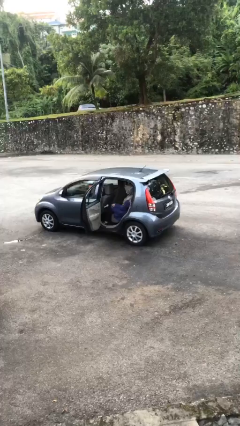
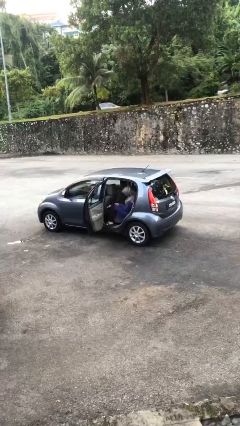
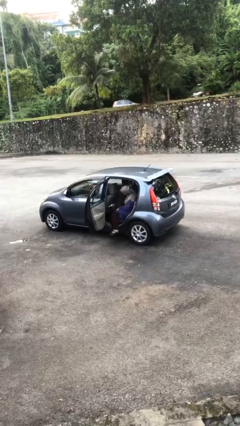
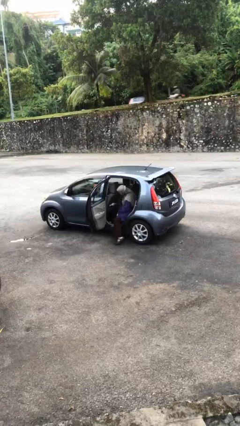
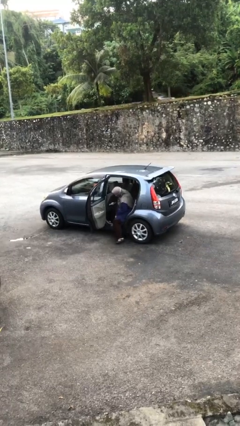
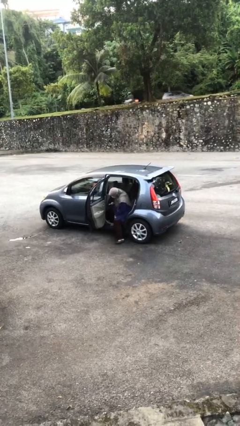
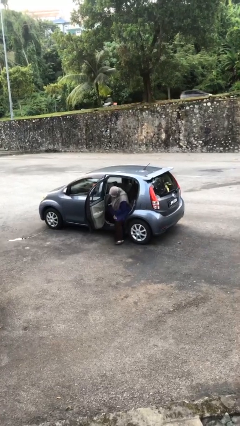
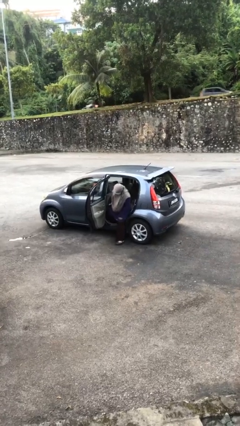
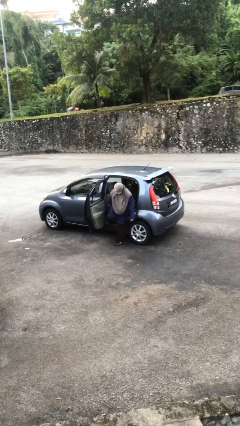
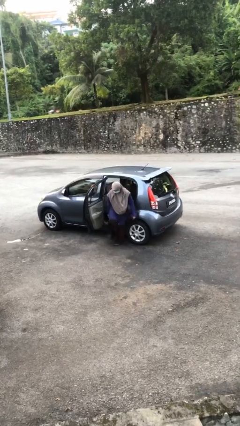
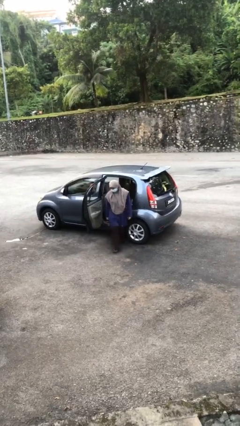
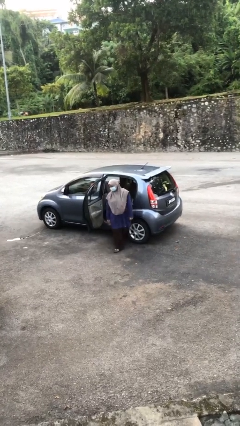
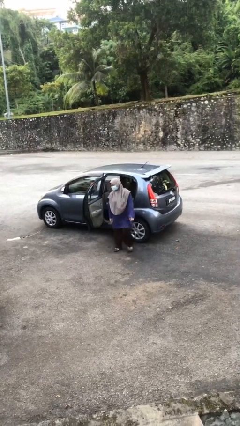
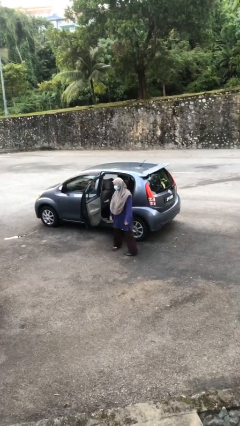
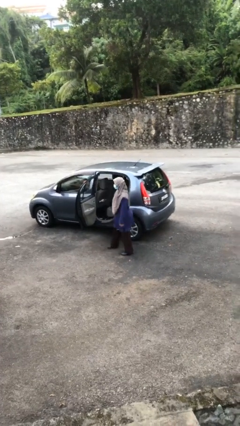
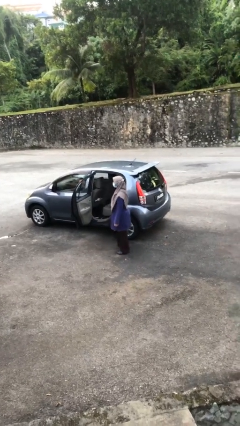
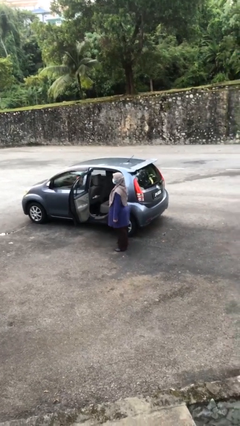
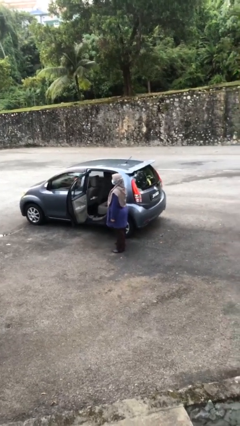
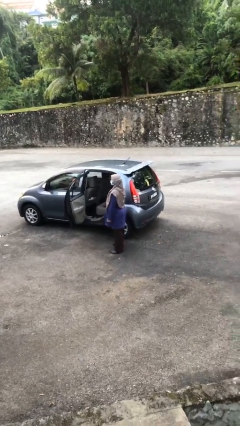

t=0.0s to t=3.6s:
person exits car

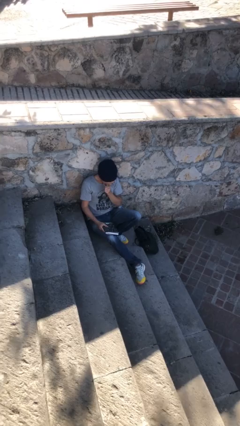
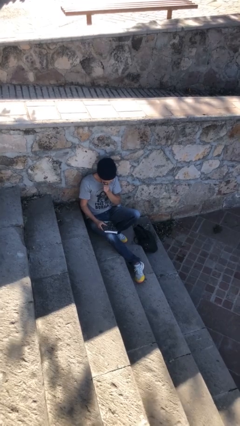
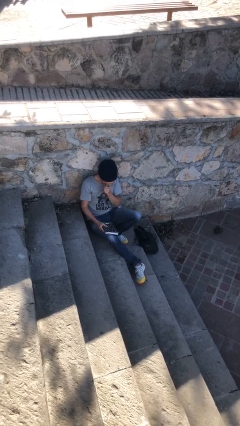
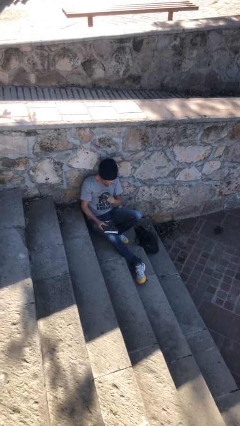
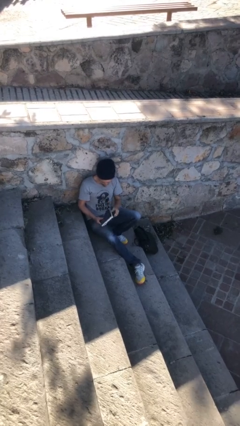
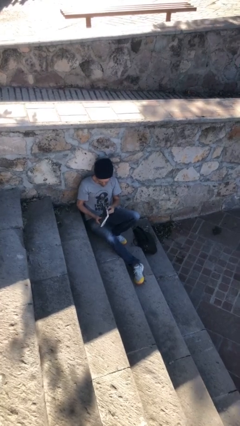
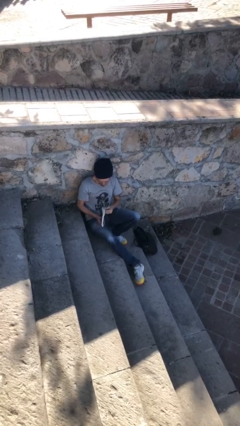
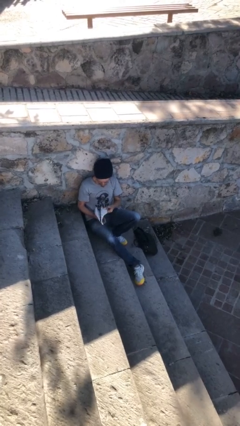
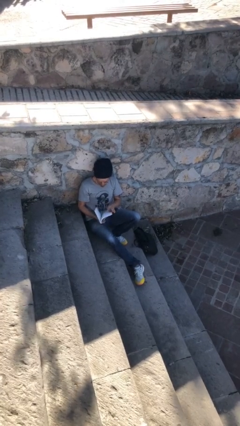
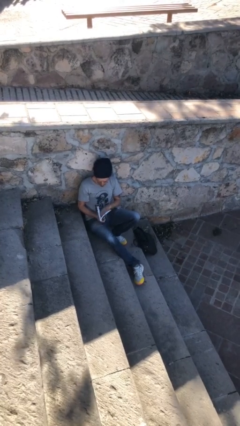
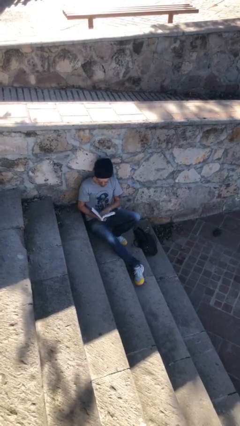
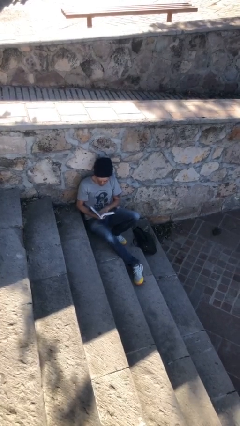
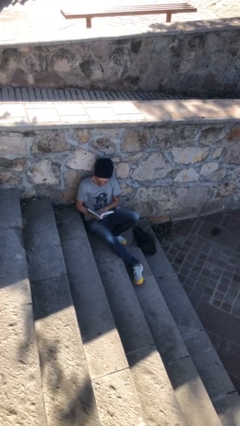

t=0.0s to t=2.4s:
person reads document

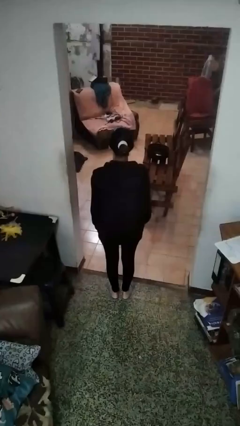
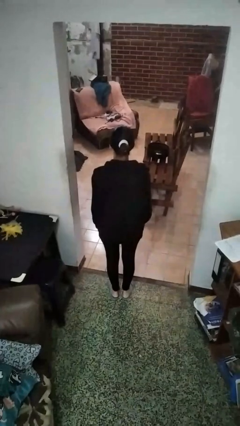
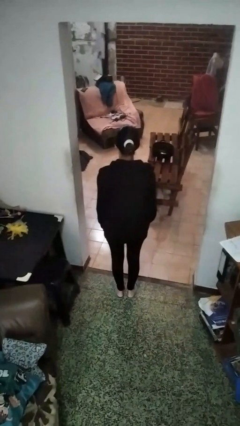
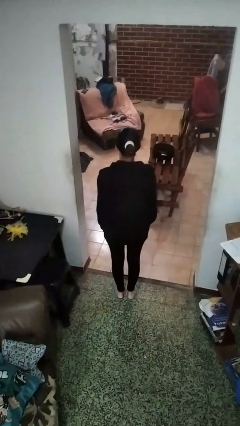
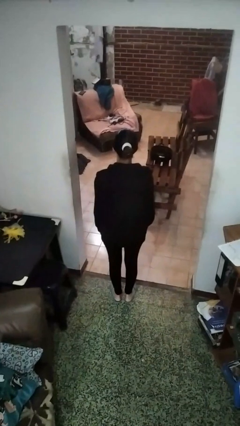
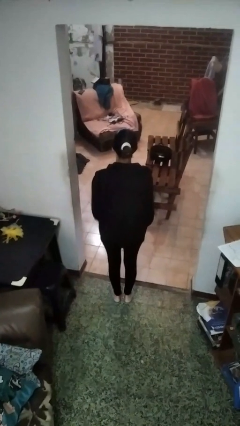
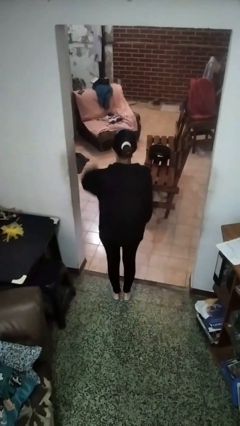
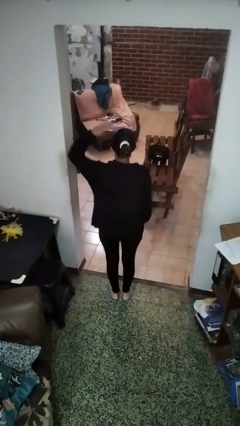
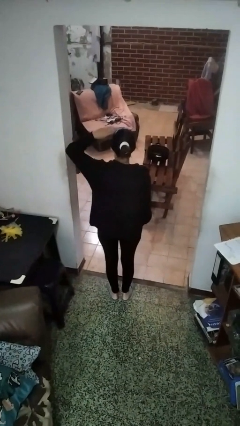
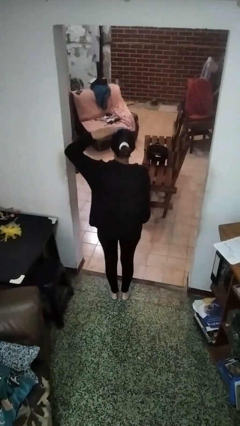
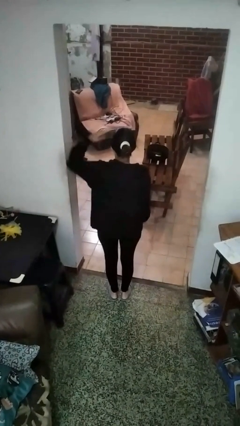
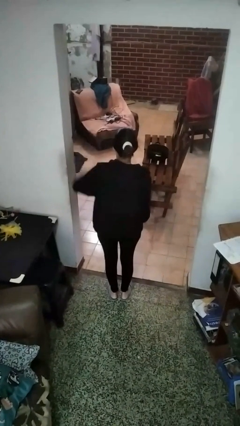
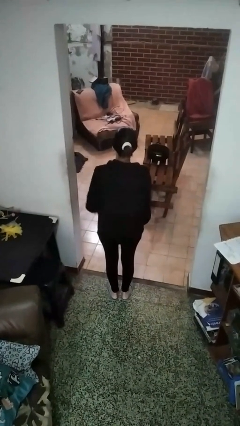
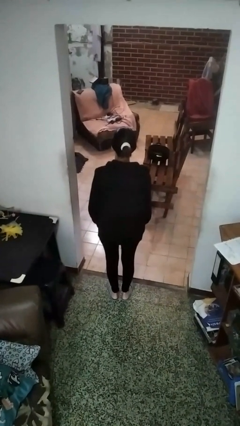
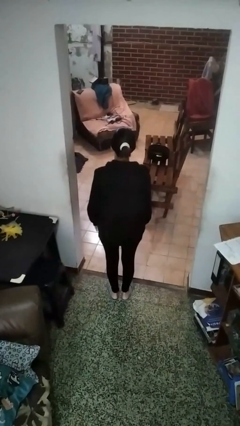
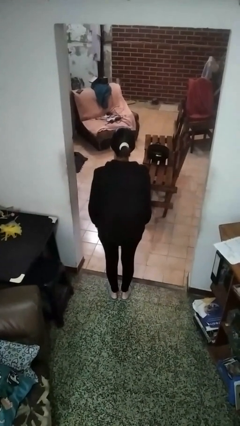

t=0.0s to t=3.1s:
person salutes

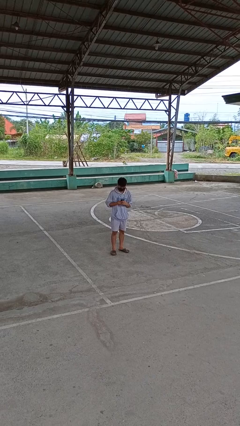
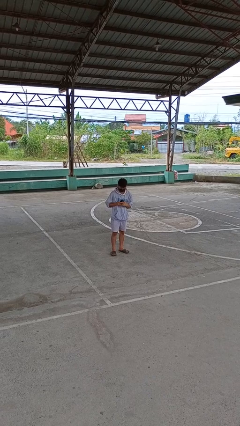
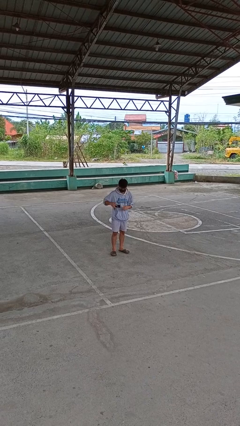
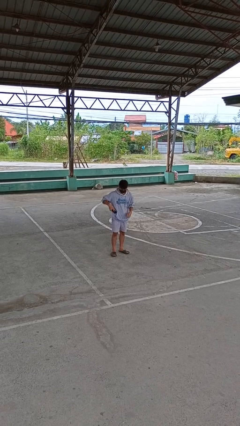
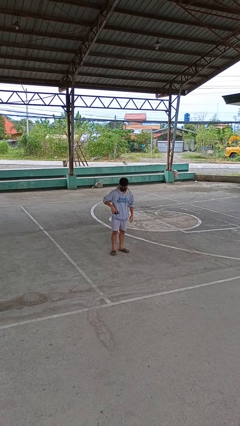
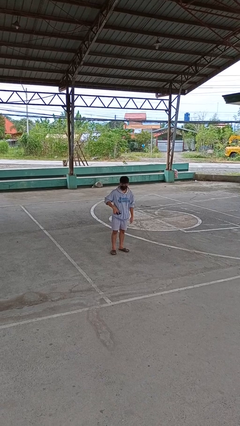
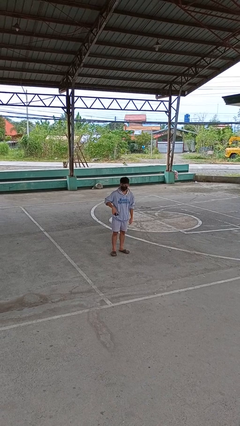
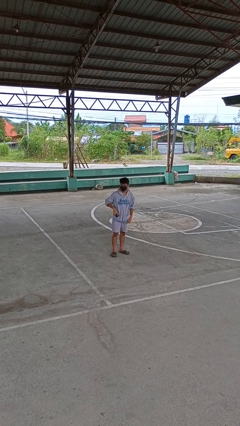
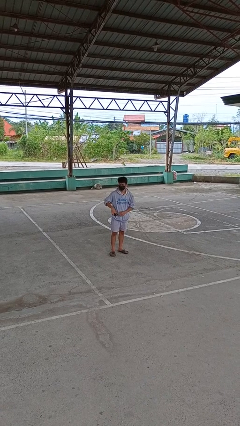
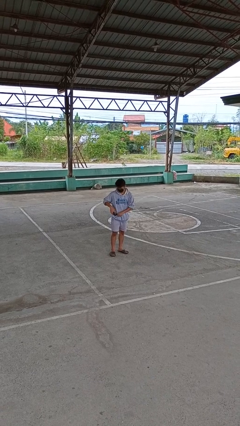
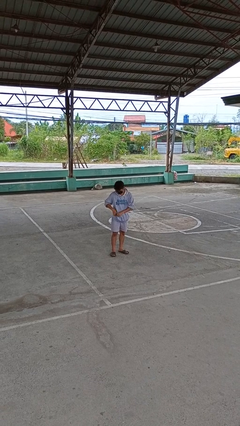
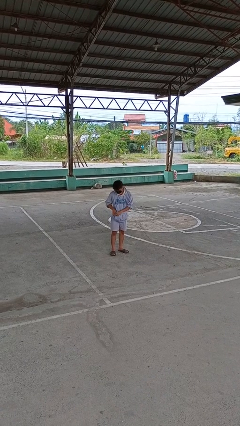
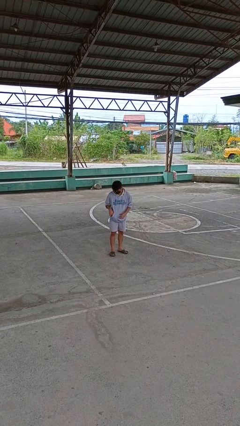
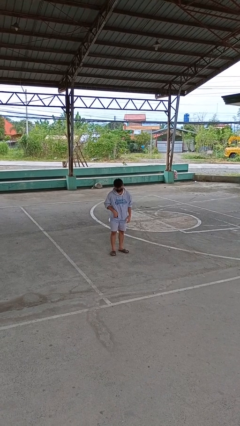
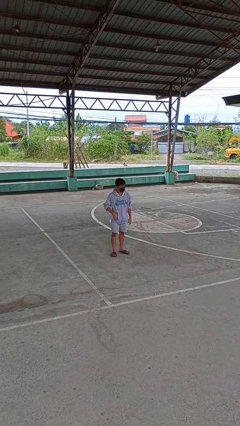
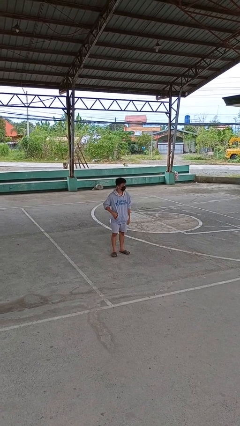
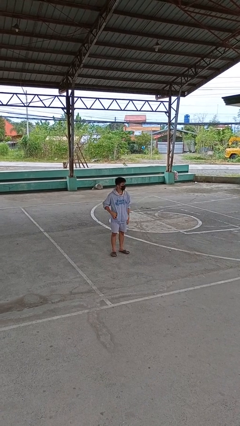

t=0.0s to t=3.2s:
person puts phone into pocket

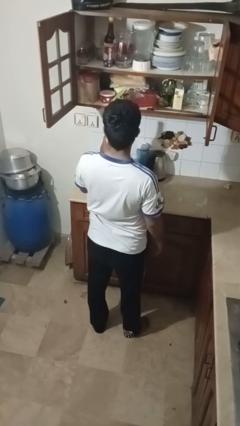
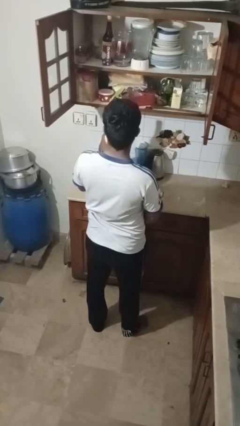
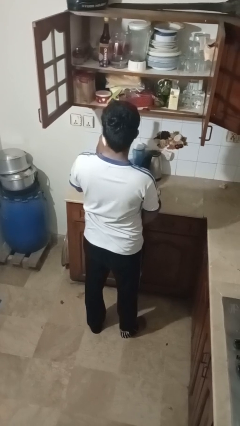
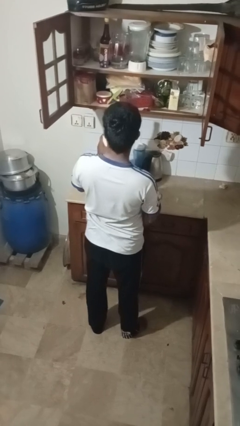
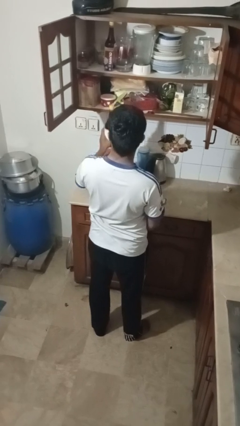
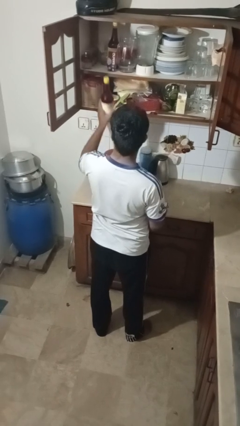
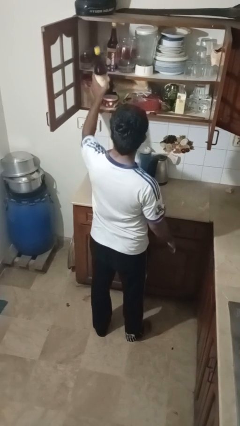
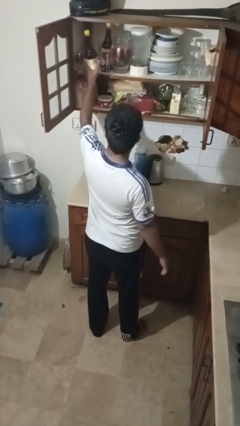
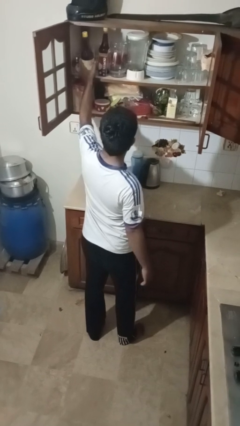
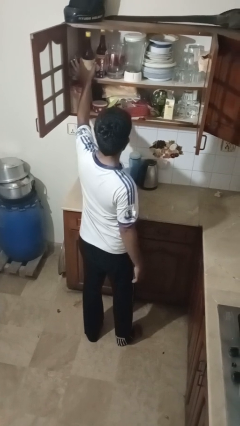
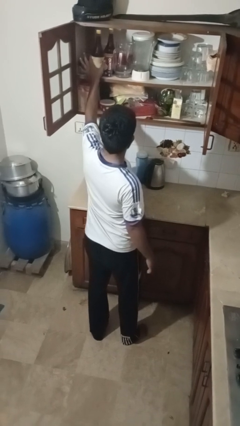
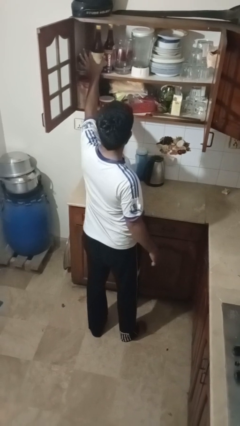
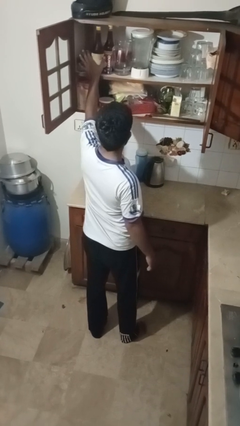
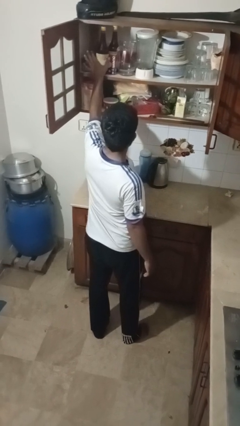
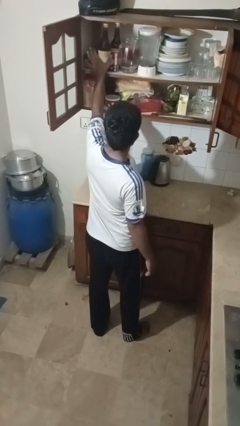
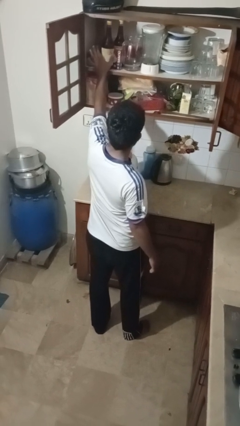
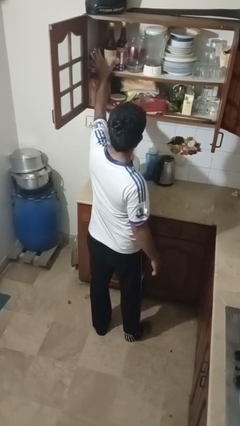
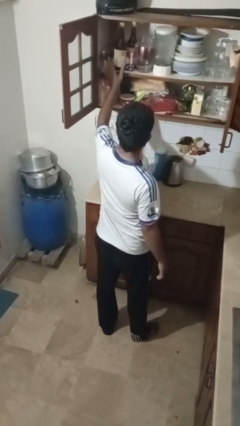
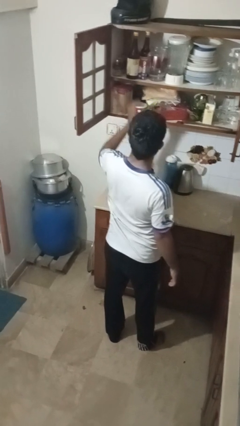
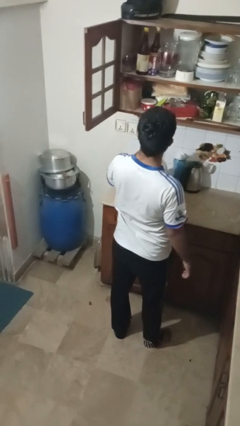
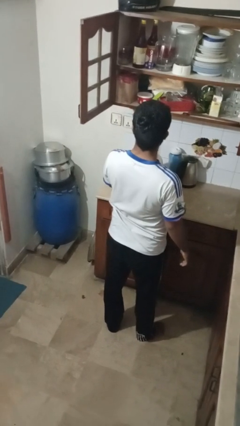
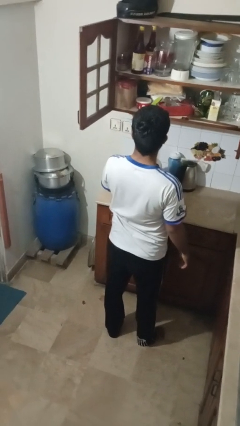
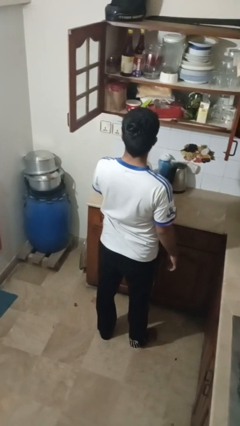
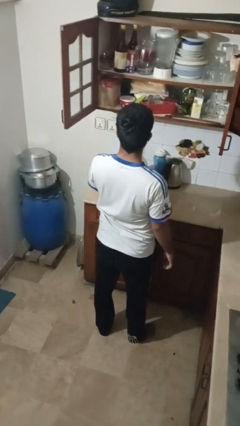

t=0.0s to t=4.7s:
person puts object in cabinet

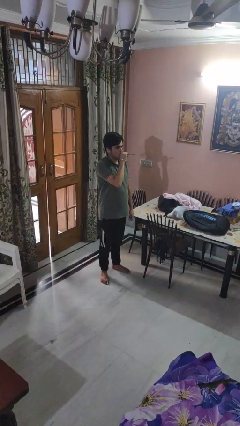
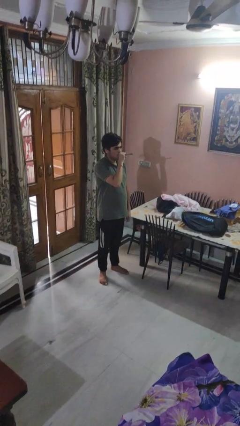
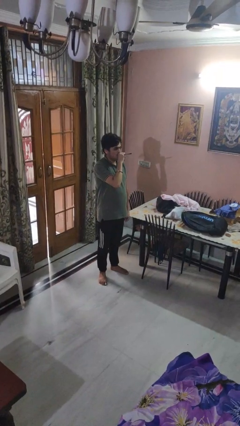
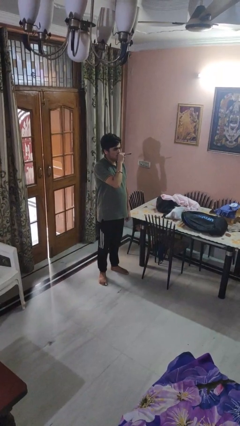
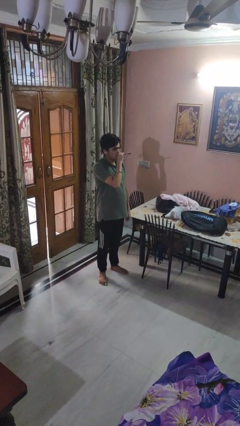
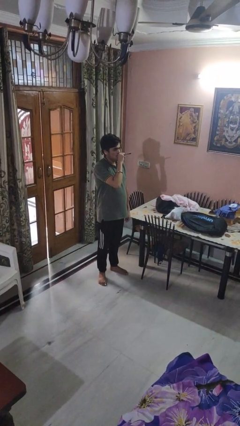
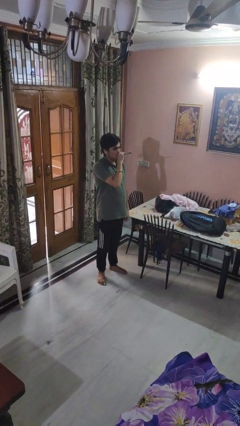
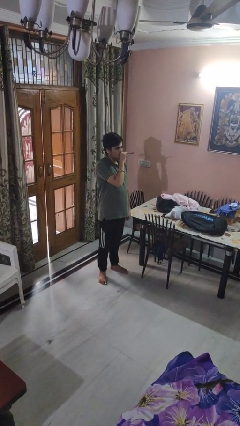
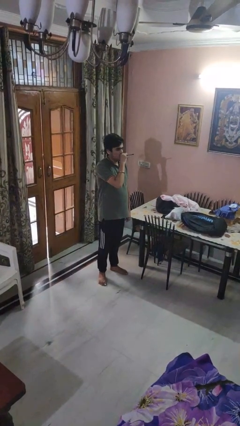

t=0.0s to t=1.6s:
person vapes
